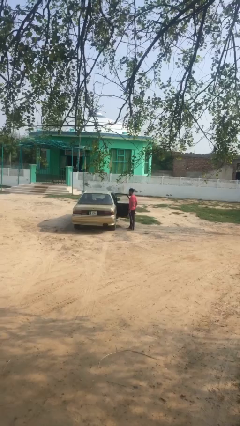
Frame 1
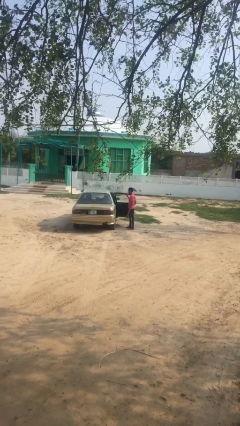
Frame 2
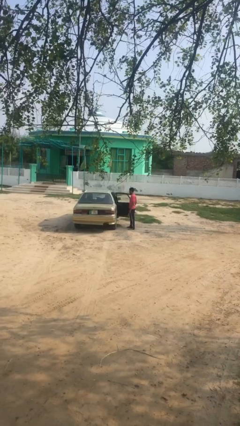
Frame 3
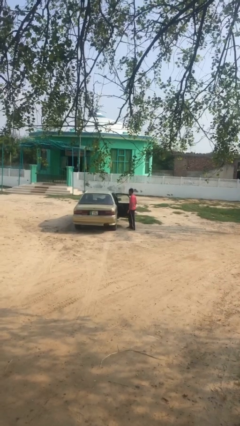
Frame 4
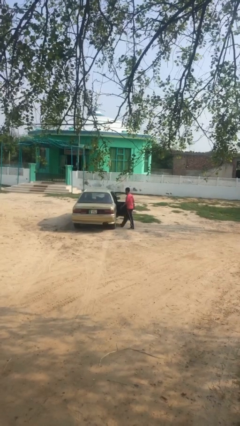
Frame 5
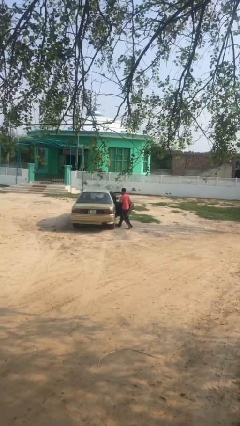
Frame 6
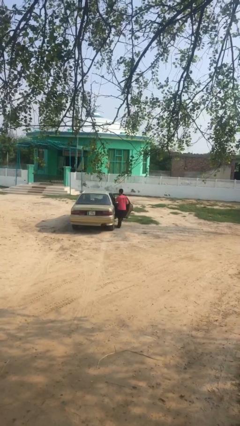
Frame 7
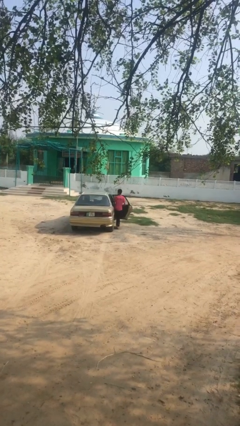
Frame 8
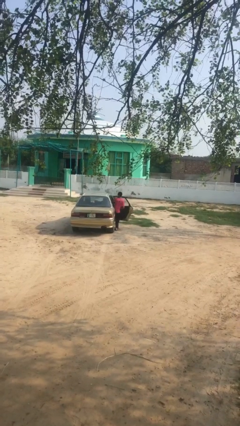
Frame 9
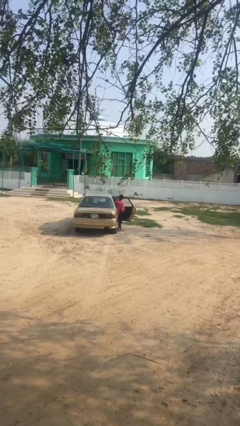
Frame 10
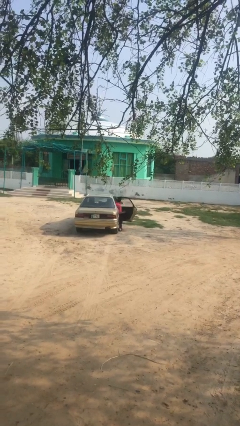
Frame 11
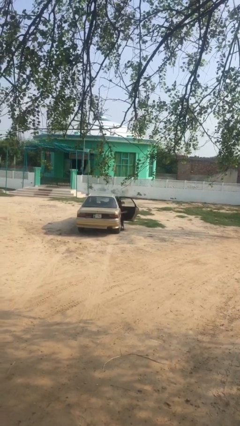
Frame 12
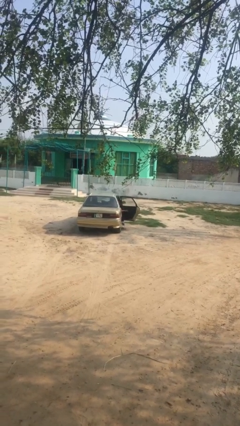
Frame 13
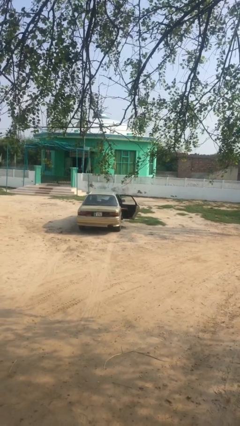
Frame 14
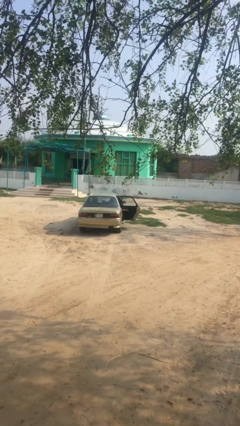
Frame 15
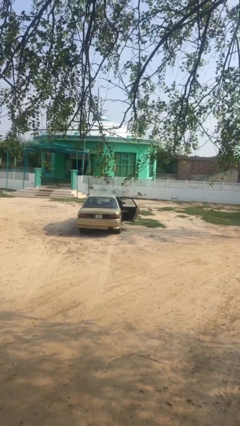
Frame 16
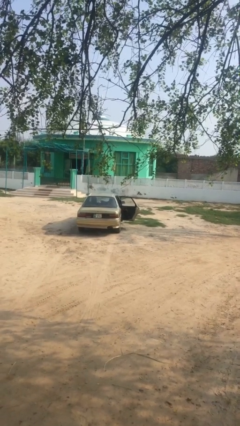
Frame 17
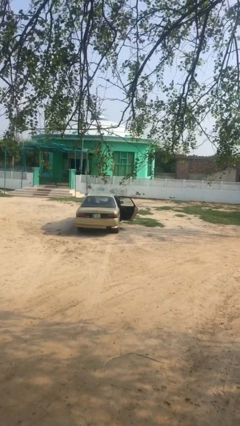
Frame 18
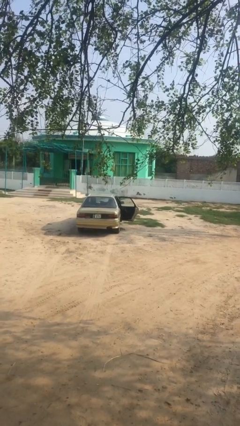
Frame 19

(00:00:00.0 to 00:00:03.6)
person enters car

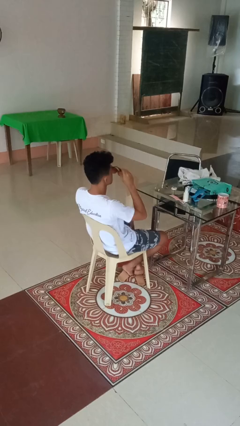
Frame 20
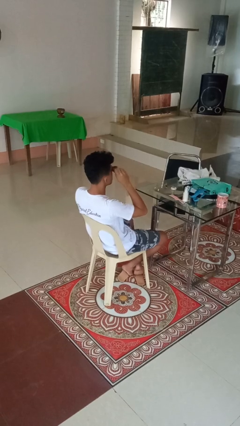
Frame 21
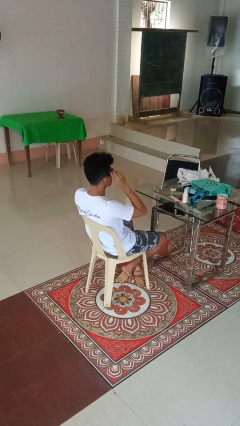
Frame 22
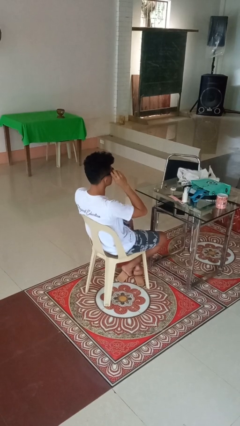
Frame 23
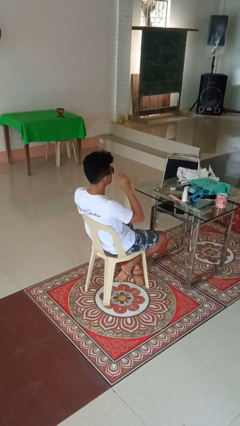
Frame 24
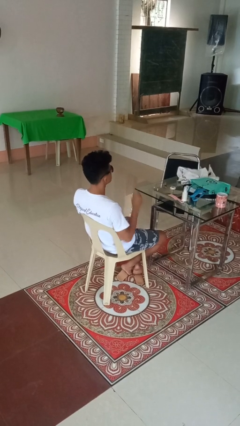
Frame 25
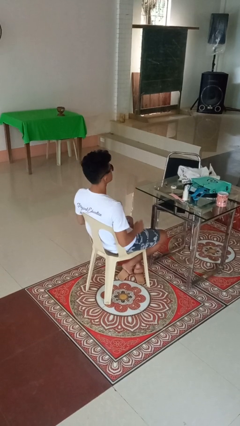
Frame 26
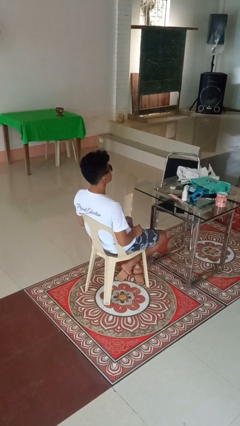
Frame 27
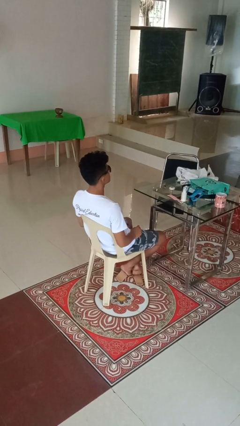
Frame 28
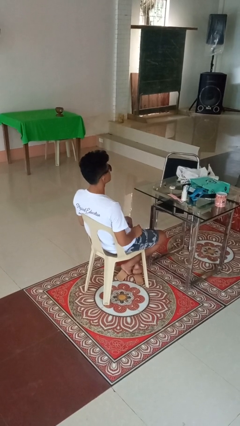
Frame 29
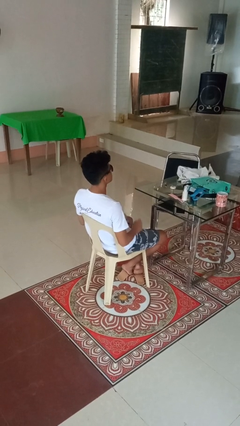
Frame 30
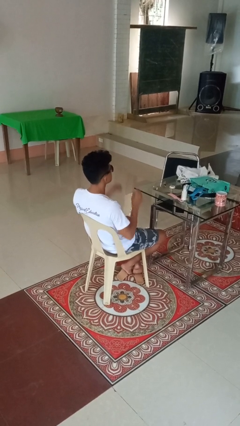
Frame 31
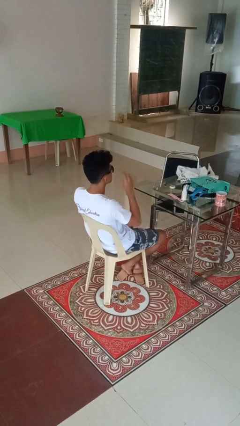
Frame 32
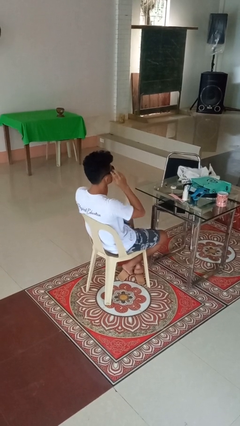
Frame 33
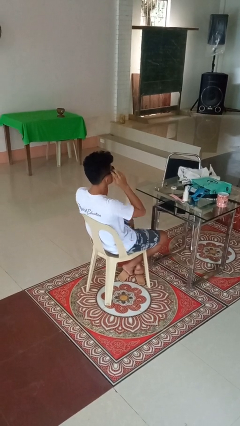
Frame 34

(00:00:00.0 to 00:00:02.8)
person puts on sunglasses

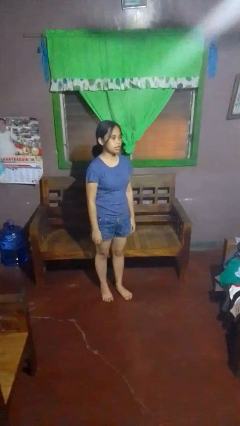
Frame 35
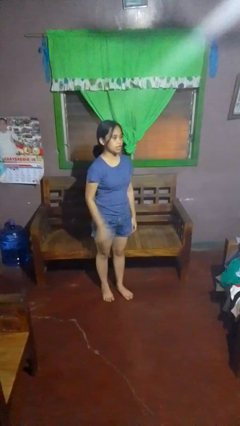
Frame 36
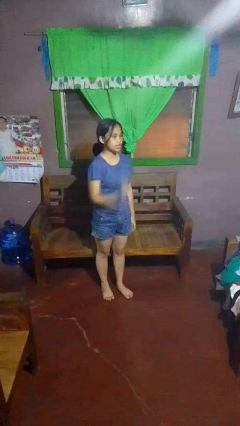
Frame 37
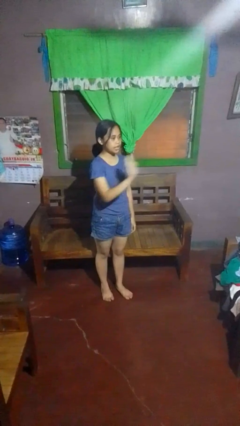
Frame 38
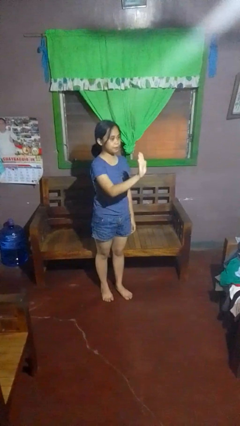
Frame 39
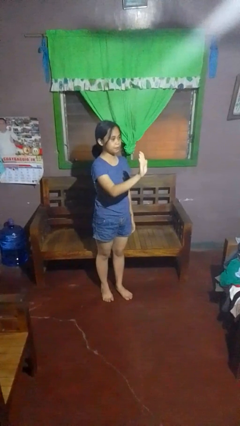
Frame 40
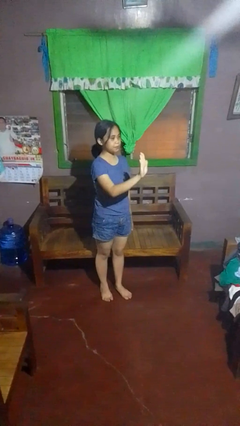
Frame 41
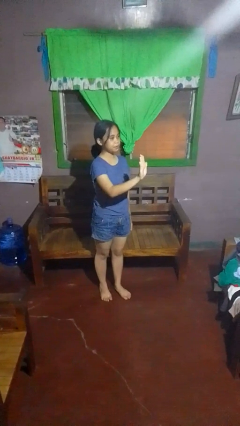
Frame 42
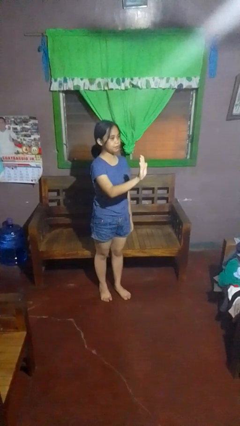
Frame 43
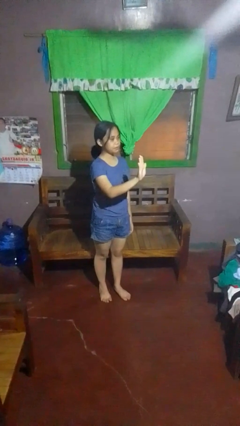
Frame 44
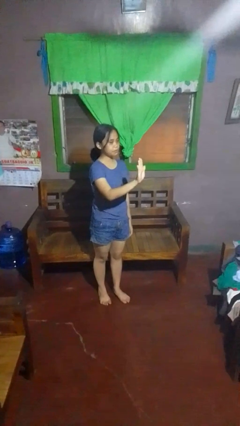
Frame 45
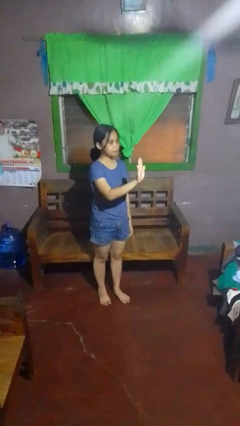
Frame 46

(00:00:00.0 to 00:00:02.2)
person gestures stop

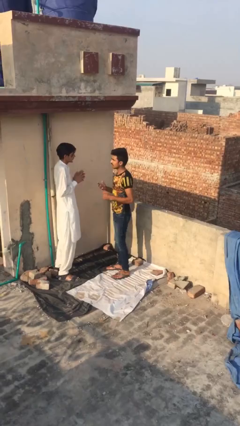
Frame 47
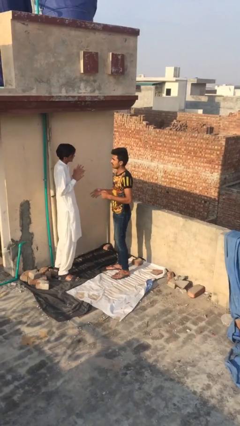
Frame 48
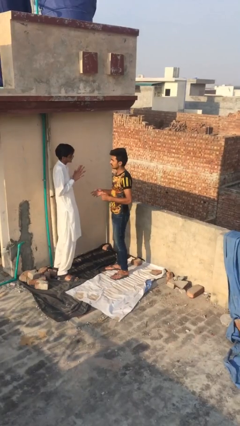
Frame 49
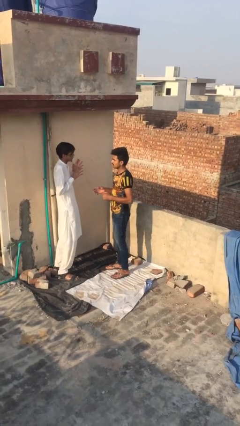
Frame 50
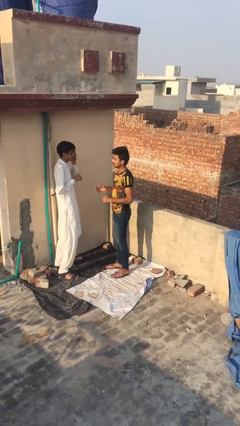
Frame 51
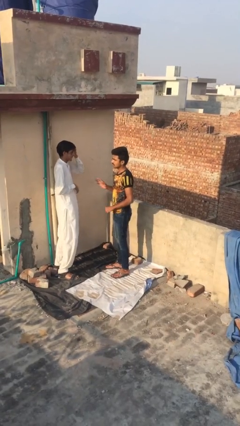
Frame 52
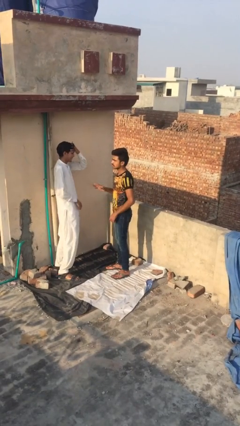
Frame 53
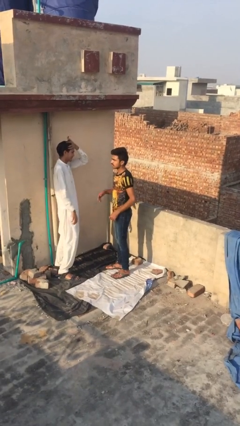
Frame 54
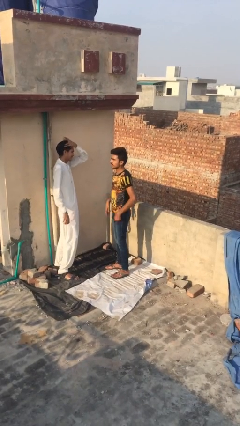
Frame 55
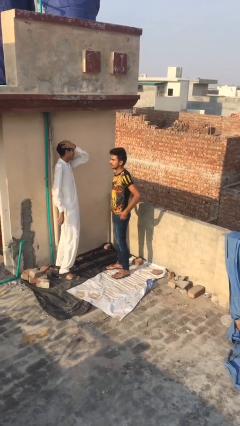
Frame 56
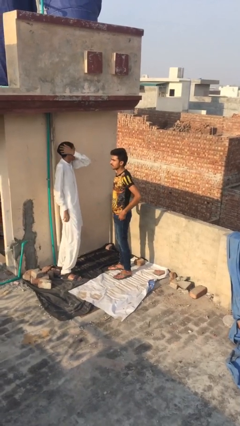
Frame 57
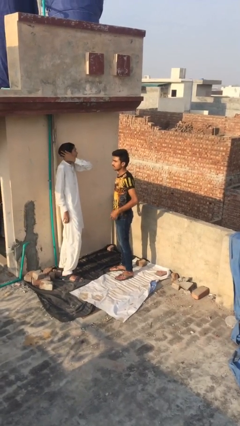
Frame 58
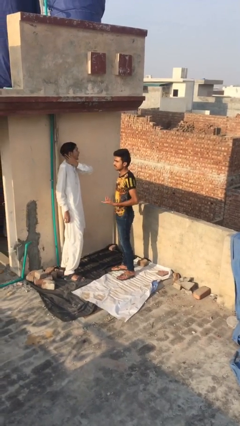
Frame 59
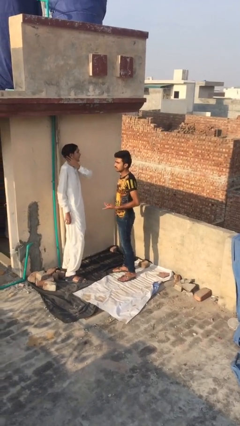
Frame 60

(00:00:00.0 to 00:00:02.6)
person talks to person

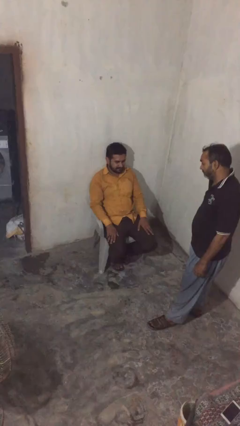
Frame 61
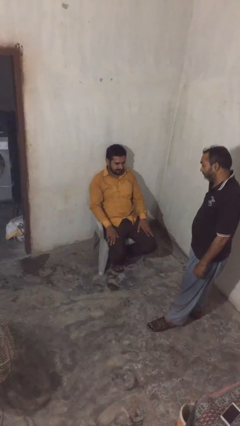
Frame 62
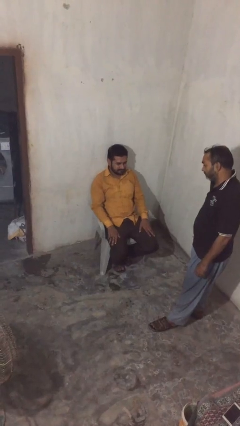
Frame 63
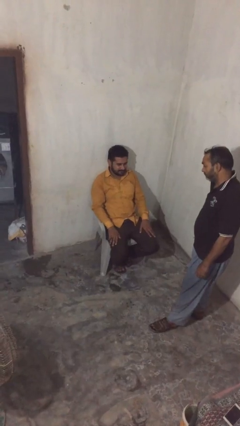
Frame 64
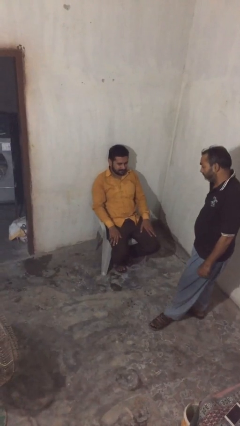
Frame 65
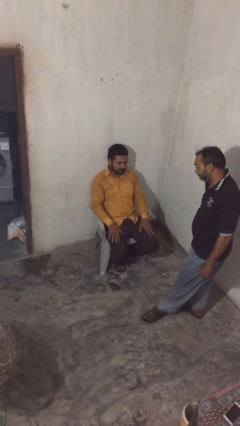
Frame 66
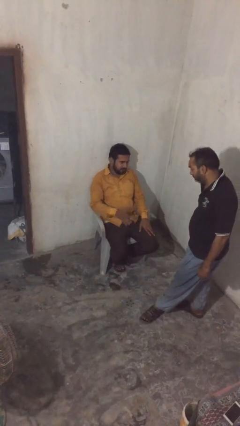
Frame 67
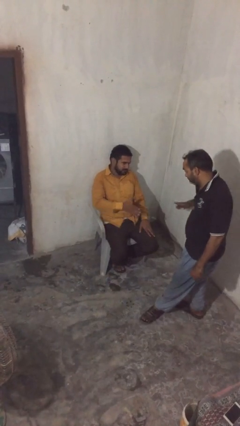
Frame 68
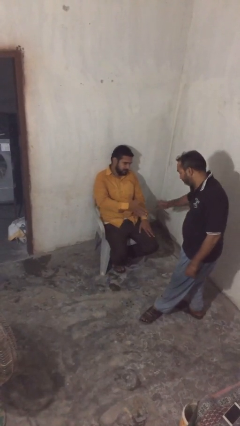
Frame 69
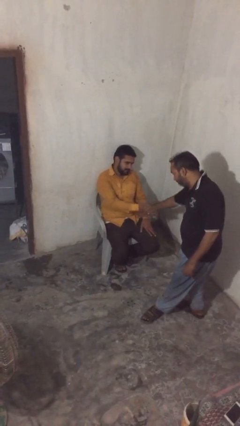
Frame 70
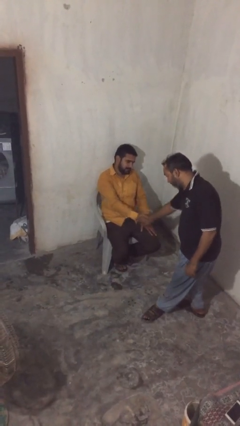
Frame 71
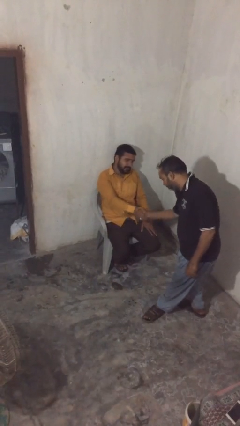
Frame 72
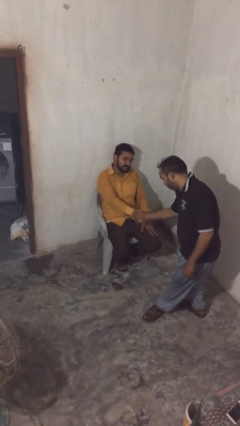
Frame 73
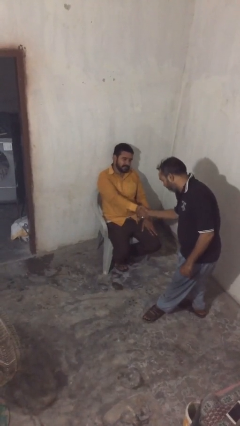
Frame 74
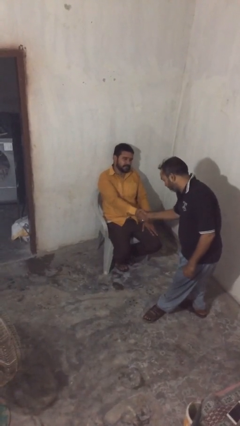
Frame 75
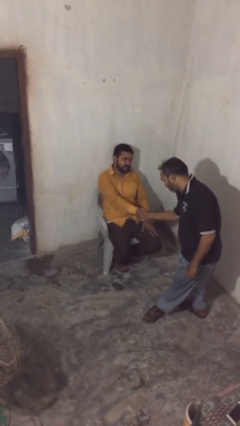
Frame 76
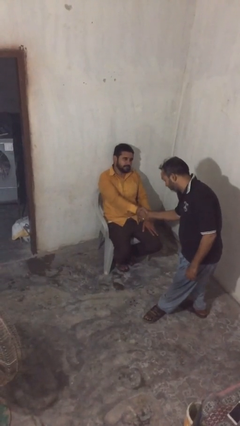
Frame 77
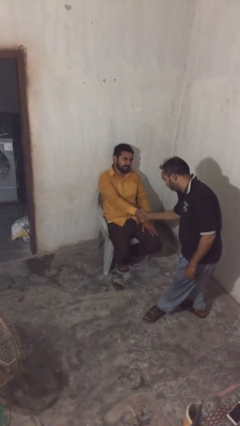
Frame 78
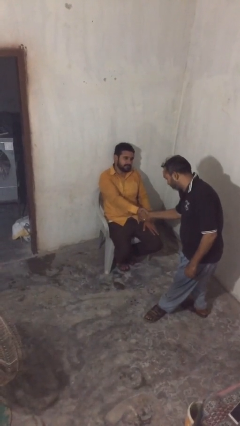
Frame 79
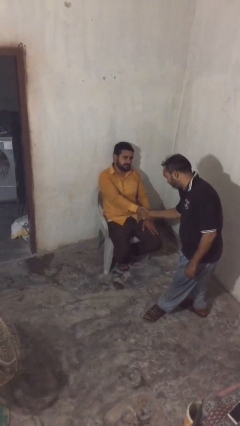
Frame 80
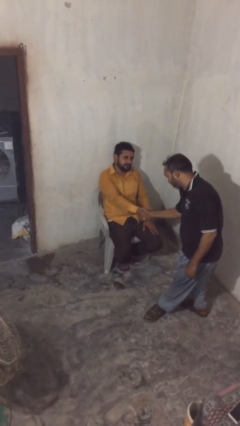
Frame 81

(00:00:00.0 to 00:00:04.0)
person shakes hand

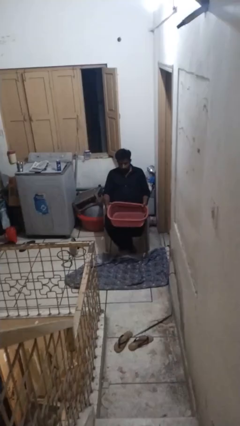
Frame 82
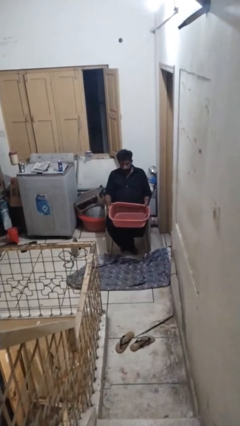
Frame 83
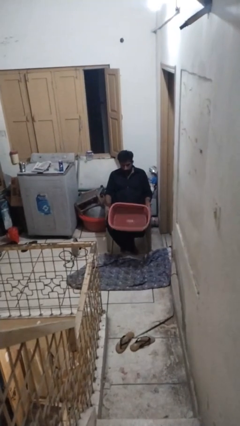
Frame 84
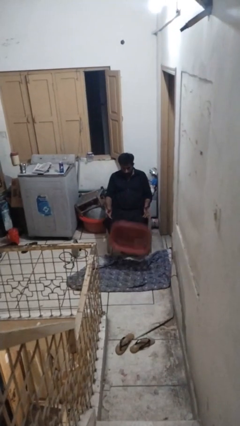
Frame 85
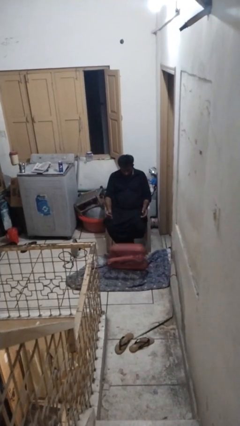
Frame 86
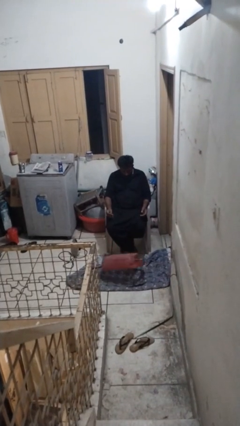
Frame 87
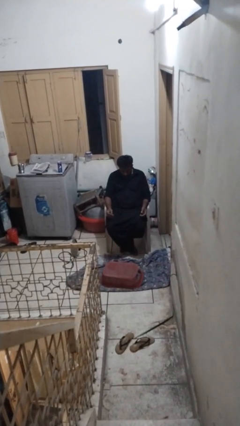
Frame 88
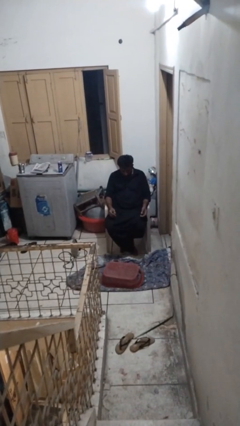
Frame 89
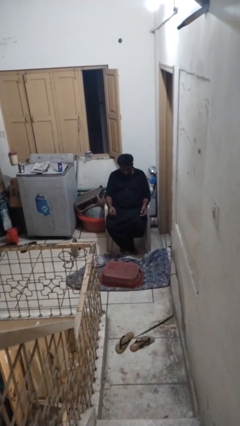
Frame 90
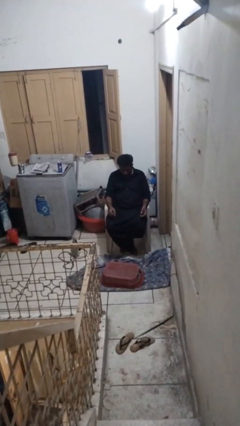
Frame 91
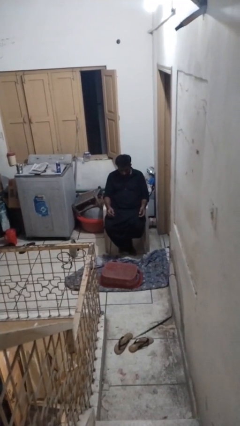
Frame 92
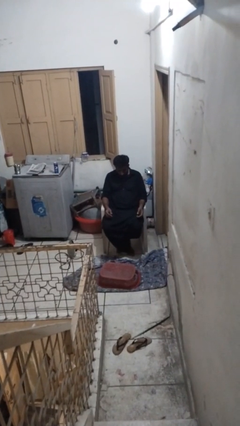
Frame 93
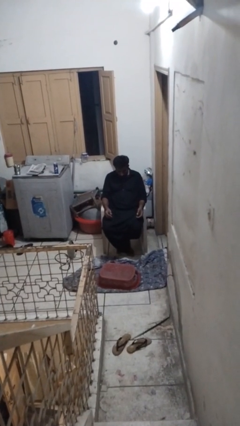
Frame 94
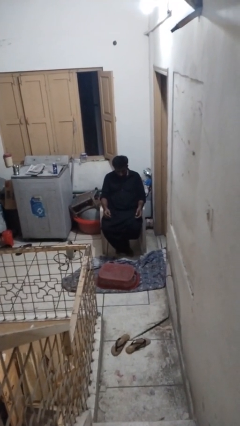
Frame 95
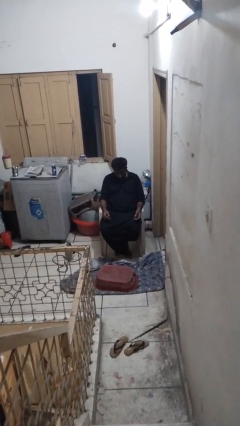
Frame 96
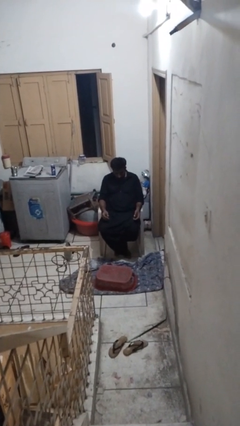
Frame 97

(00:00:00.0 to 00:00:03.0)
person drops object
